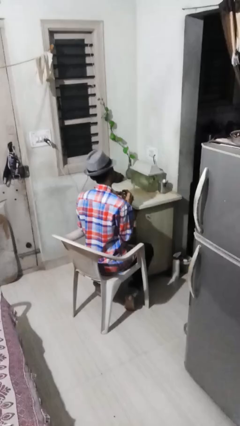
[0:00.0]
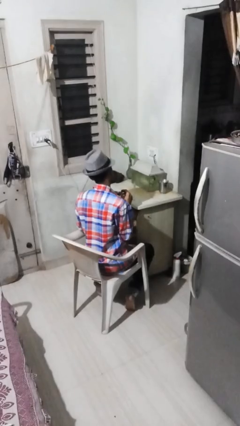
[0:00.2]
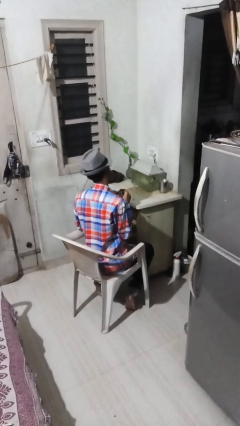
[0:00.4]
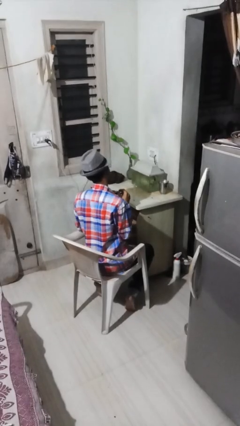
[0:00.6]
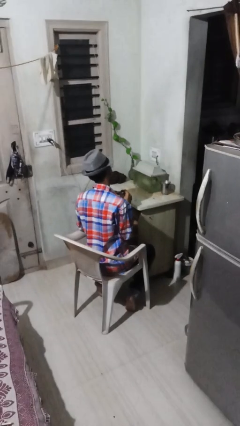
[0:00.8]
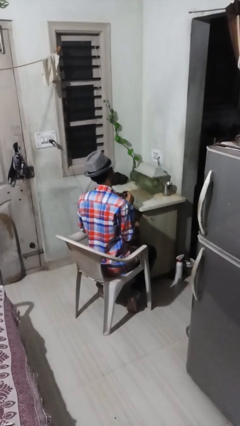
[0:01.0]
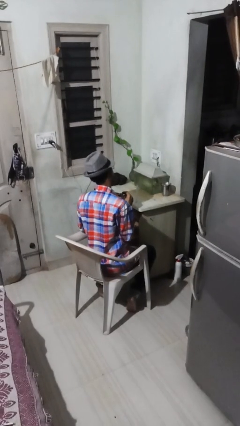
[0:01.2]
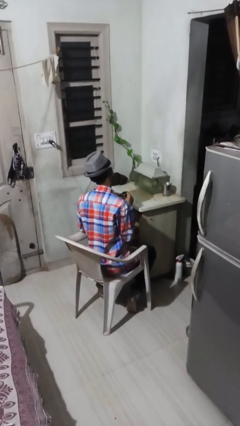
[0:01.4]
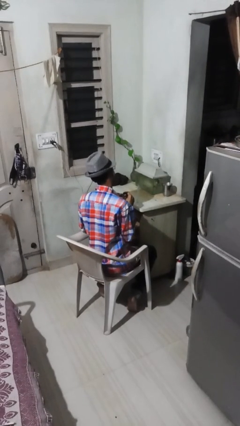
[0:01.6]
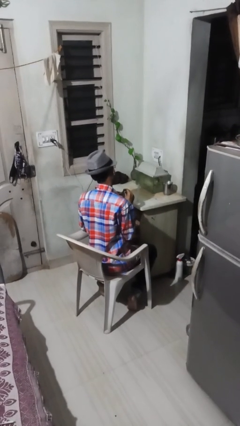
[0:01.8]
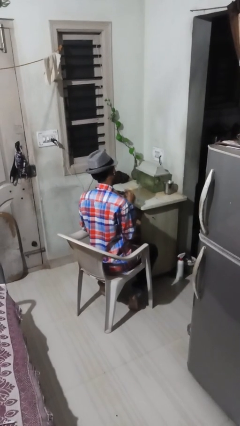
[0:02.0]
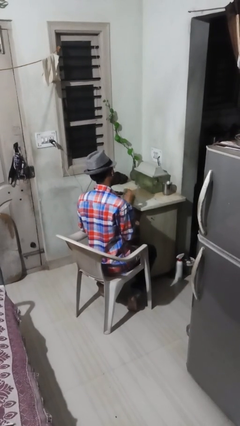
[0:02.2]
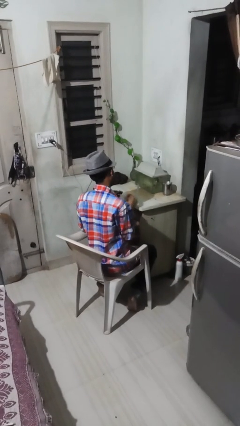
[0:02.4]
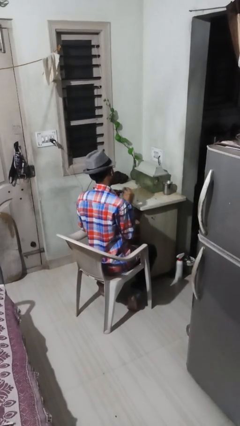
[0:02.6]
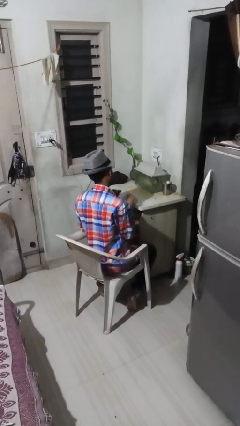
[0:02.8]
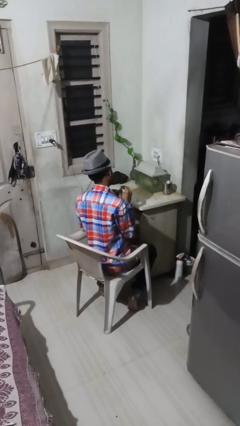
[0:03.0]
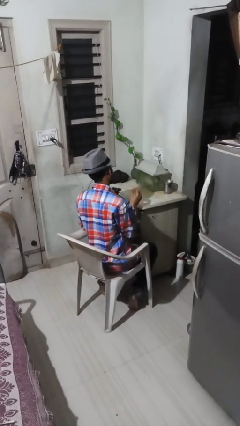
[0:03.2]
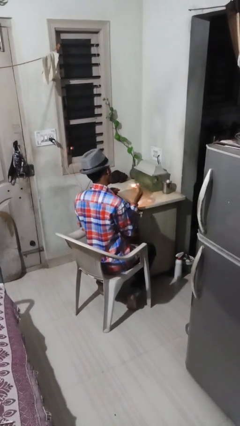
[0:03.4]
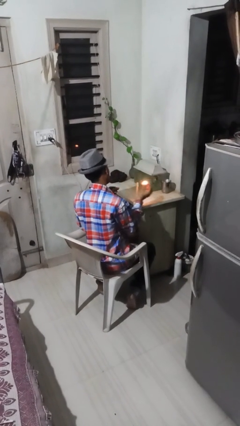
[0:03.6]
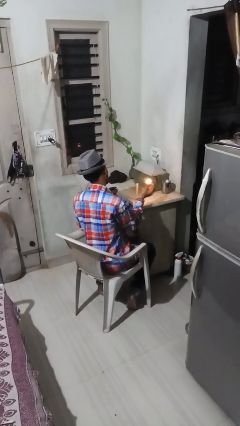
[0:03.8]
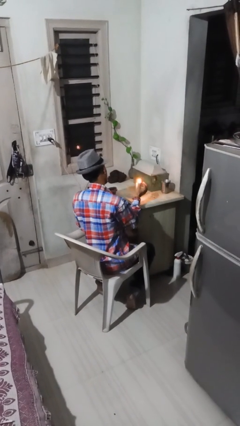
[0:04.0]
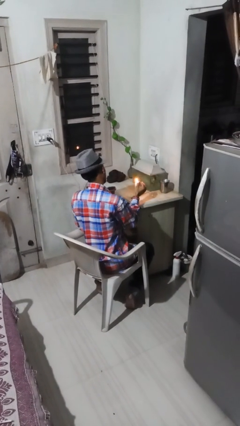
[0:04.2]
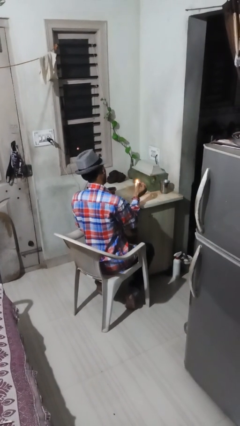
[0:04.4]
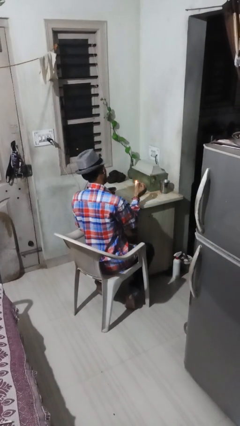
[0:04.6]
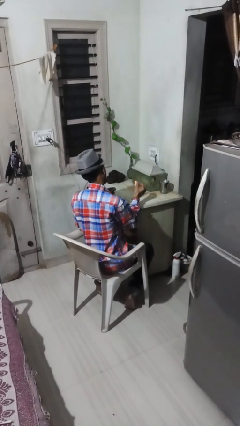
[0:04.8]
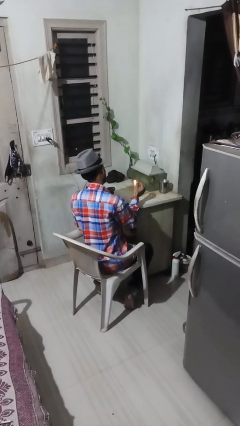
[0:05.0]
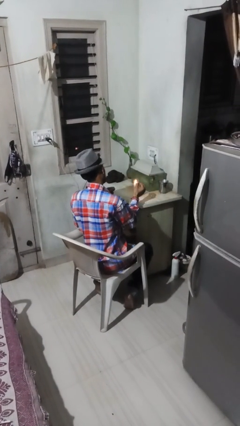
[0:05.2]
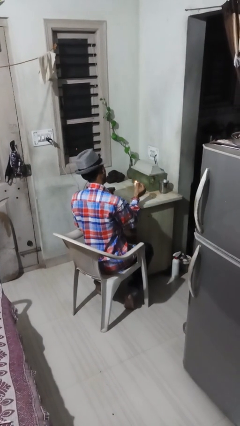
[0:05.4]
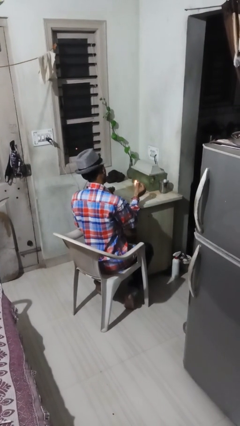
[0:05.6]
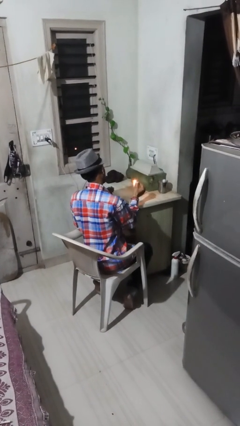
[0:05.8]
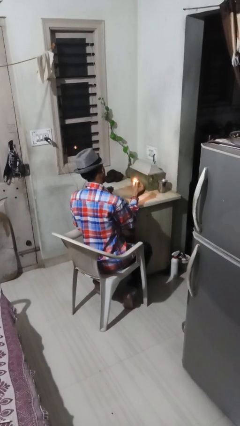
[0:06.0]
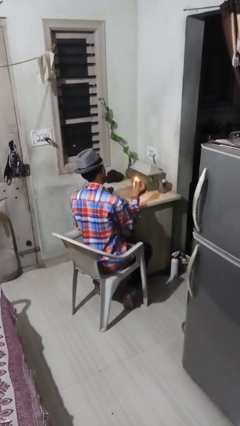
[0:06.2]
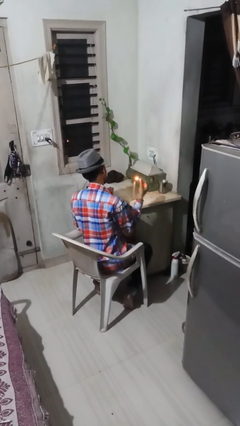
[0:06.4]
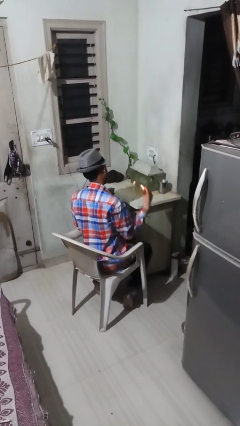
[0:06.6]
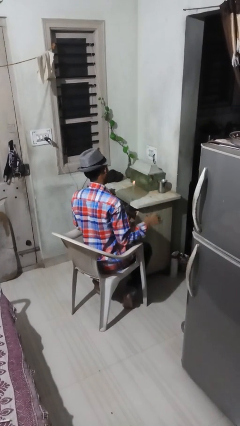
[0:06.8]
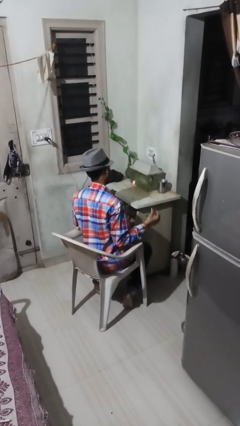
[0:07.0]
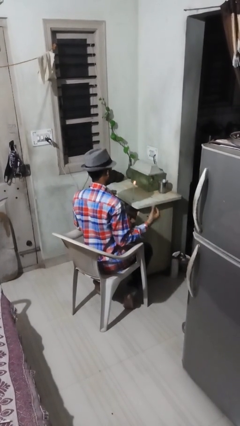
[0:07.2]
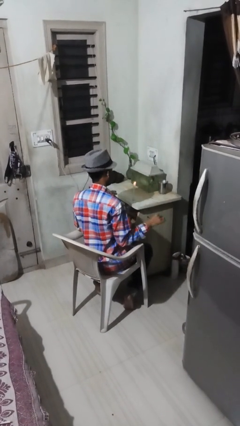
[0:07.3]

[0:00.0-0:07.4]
person lights candle

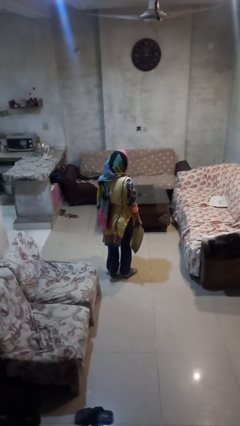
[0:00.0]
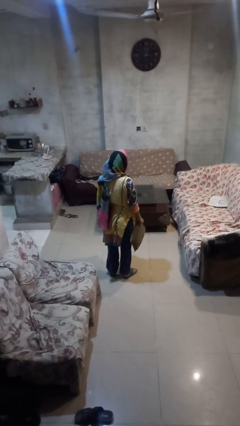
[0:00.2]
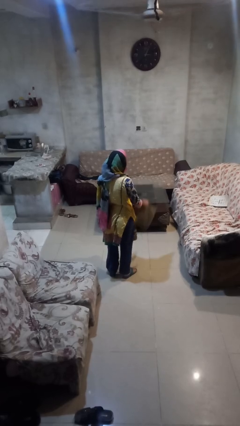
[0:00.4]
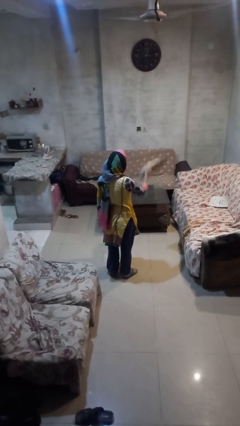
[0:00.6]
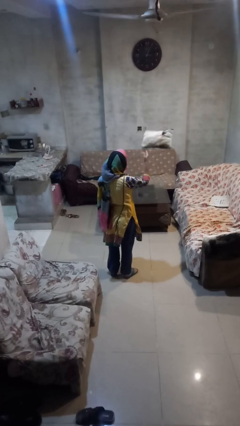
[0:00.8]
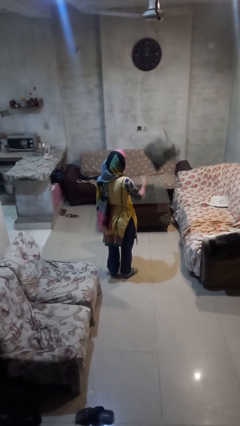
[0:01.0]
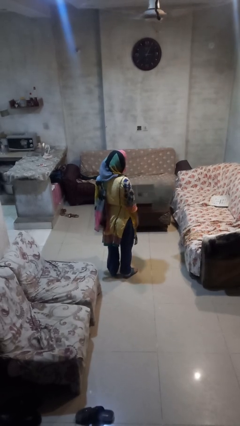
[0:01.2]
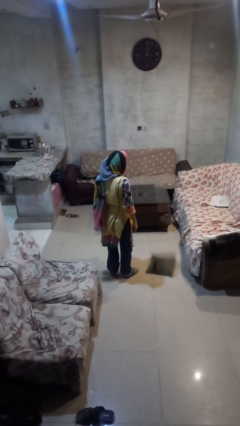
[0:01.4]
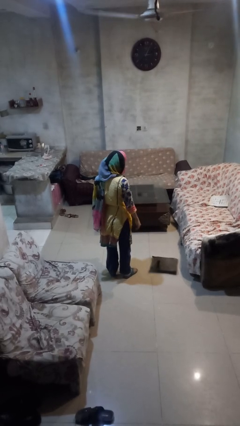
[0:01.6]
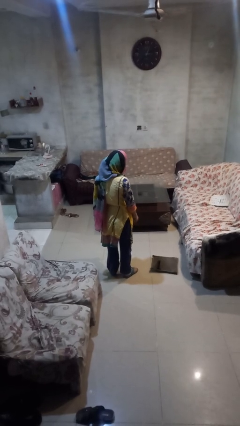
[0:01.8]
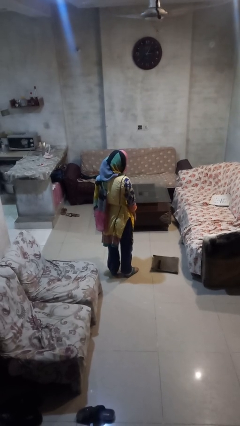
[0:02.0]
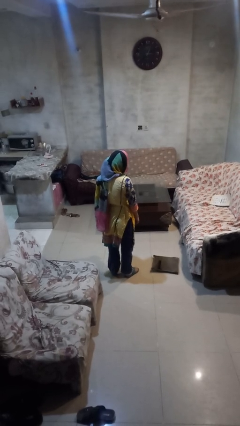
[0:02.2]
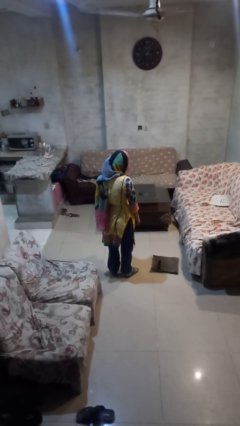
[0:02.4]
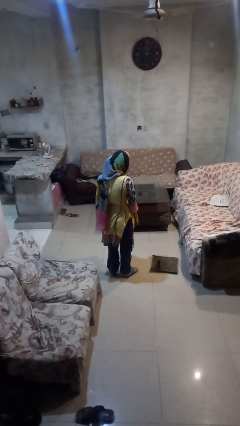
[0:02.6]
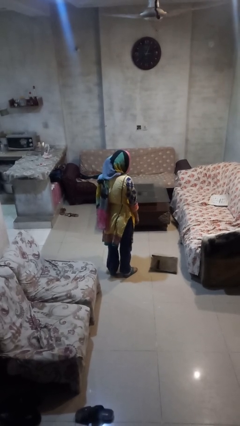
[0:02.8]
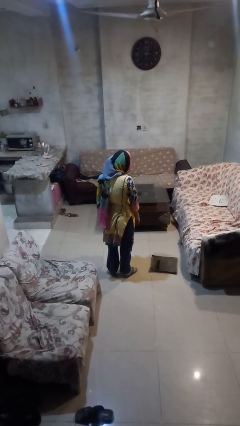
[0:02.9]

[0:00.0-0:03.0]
person throws object into air

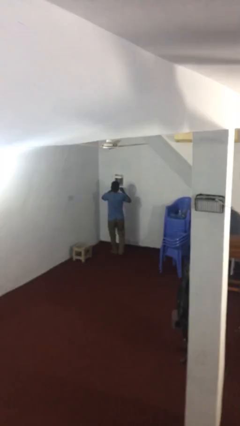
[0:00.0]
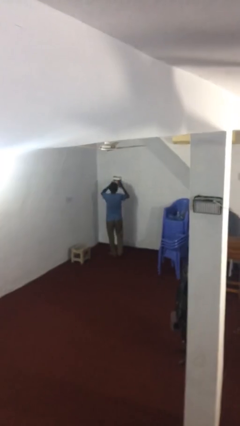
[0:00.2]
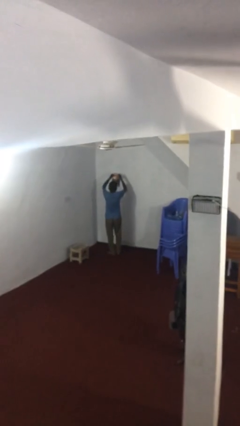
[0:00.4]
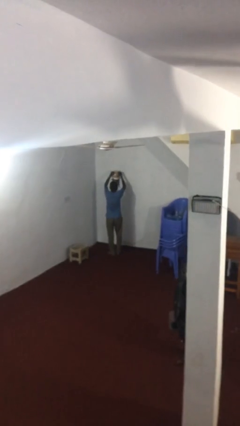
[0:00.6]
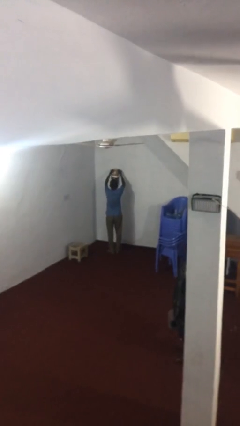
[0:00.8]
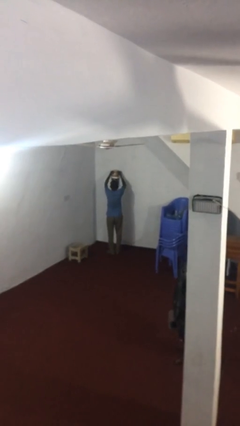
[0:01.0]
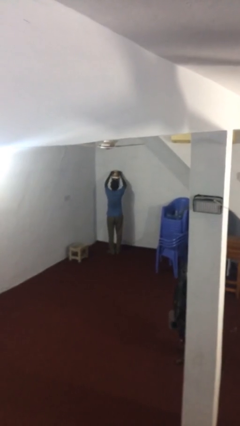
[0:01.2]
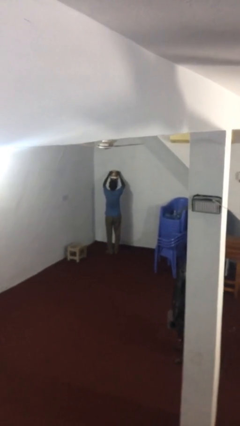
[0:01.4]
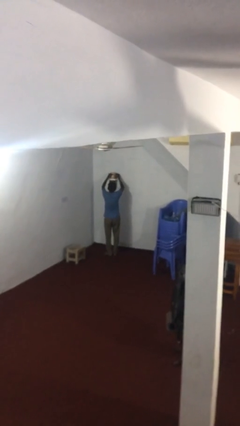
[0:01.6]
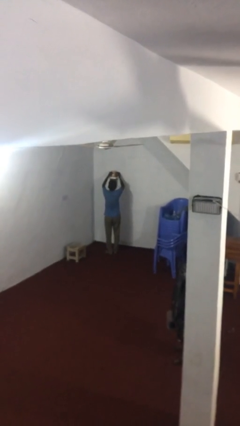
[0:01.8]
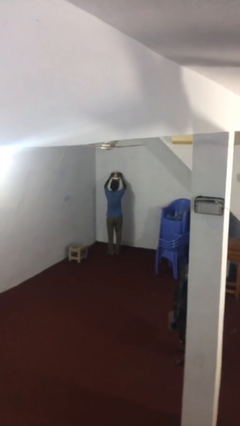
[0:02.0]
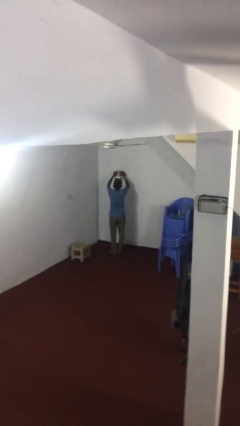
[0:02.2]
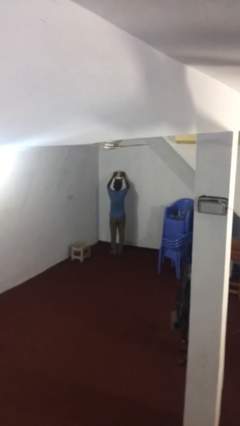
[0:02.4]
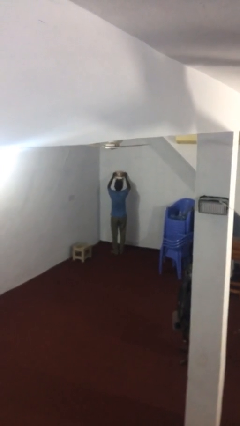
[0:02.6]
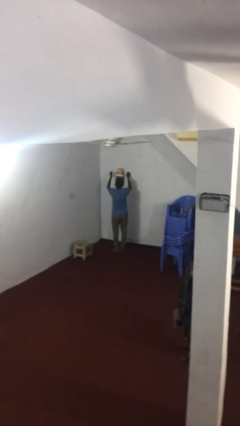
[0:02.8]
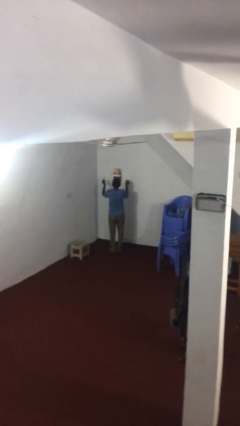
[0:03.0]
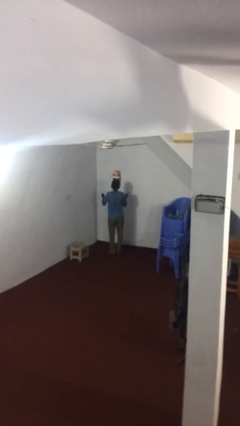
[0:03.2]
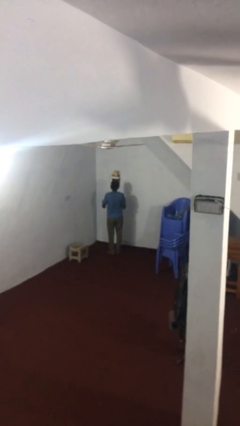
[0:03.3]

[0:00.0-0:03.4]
person puts down object on shelf

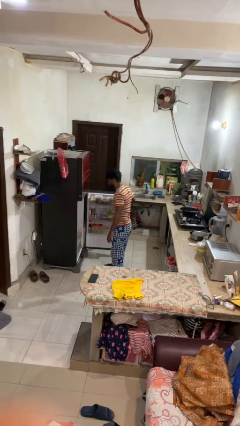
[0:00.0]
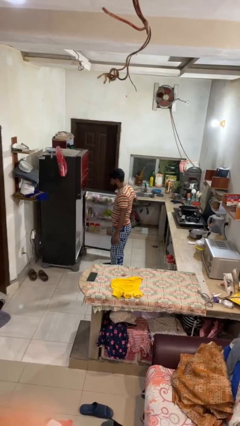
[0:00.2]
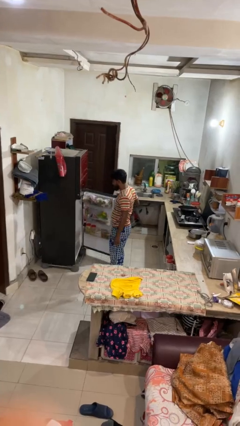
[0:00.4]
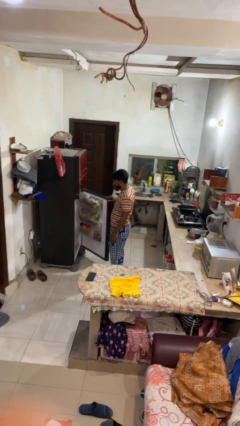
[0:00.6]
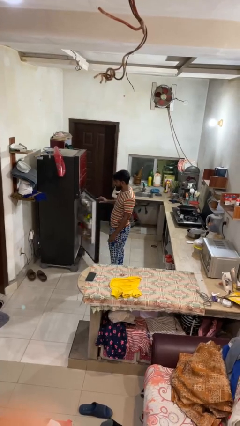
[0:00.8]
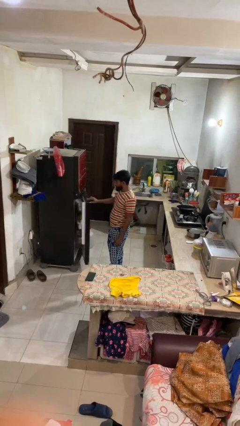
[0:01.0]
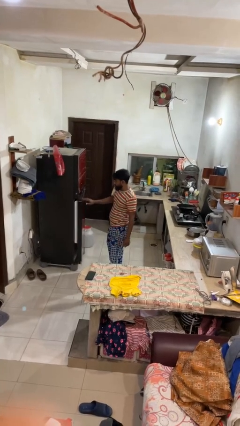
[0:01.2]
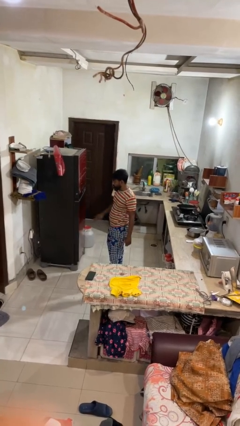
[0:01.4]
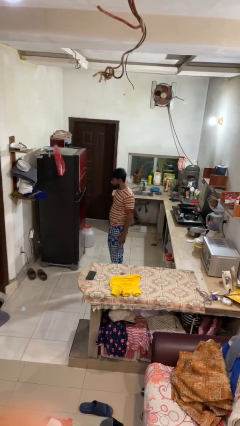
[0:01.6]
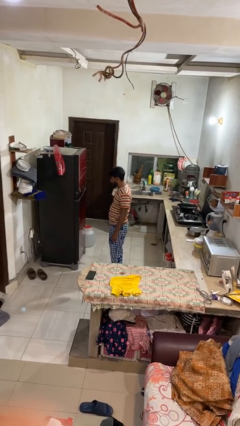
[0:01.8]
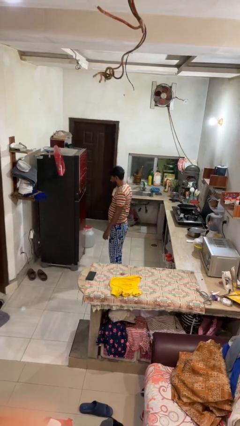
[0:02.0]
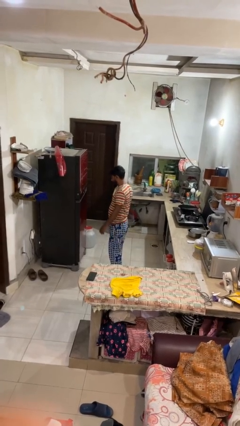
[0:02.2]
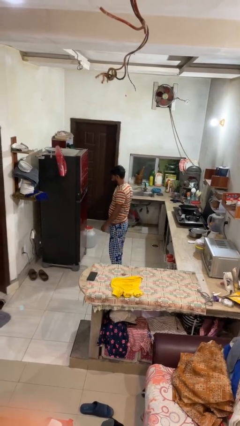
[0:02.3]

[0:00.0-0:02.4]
person closes refrigerator

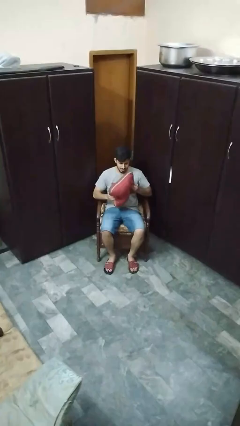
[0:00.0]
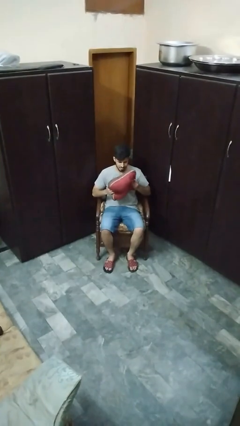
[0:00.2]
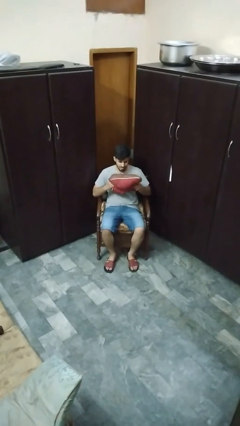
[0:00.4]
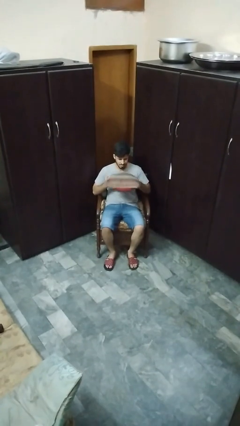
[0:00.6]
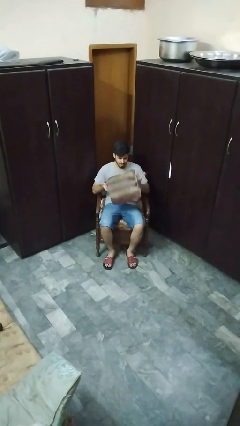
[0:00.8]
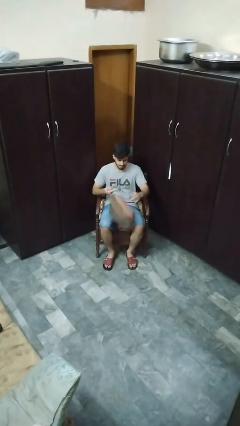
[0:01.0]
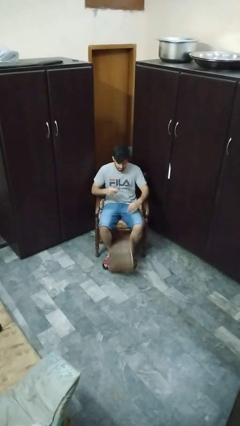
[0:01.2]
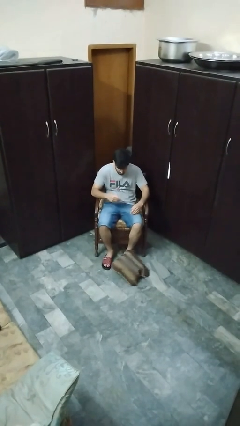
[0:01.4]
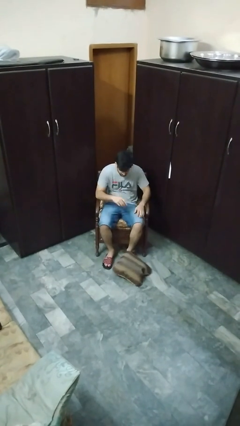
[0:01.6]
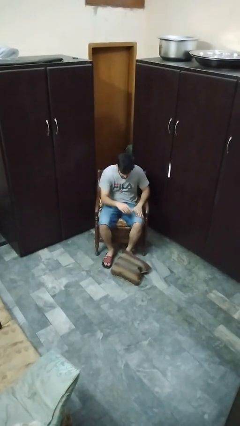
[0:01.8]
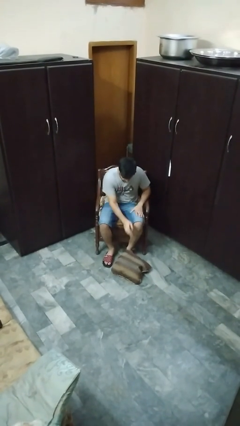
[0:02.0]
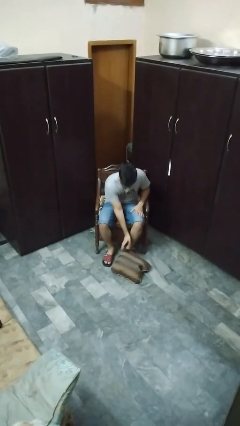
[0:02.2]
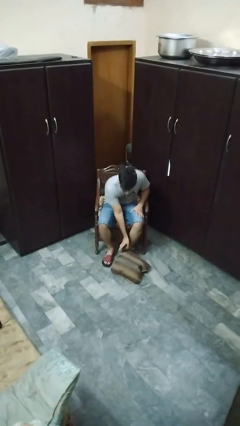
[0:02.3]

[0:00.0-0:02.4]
person drops object
